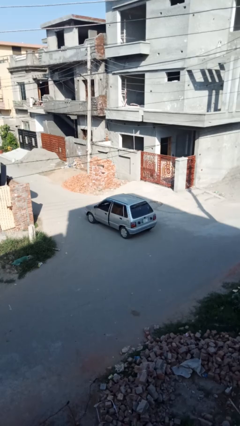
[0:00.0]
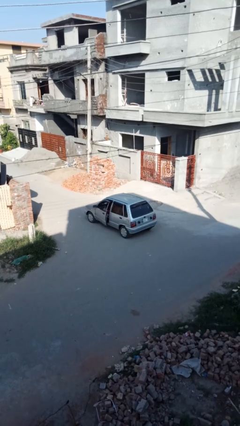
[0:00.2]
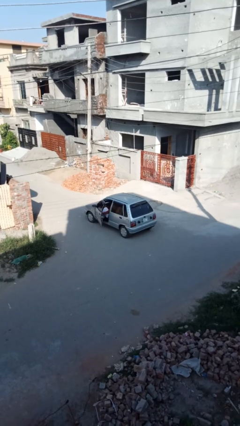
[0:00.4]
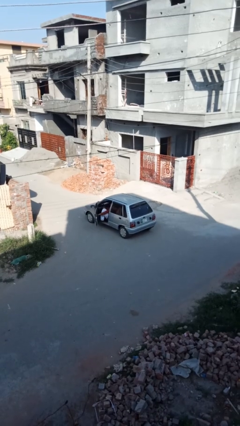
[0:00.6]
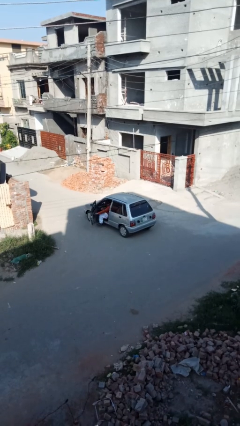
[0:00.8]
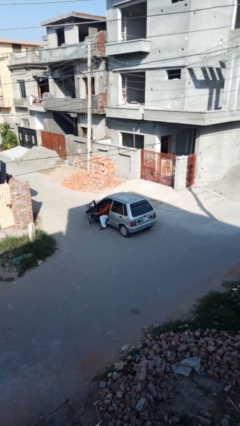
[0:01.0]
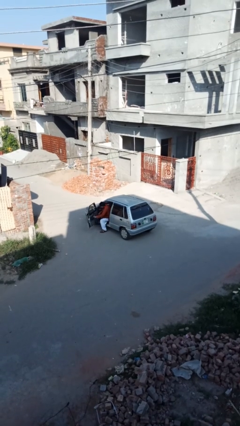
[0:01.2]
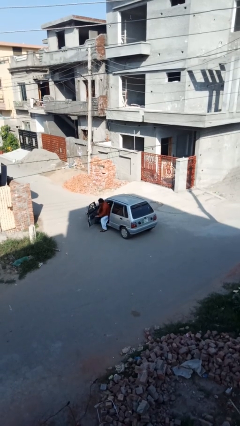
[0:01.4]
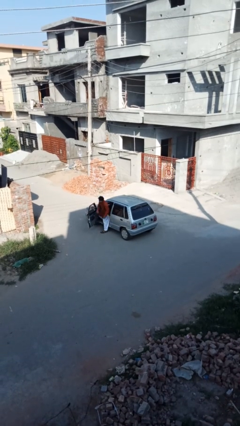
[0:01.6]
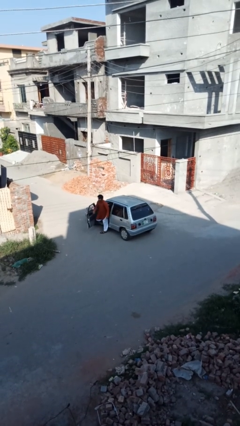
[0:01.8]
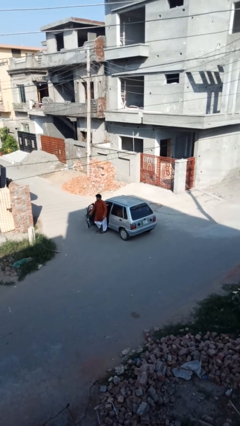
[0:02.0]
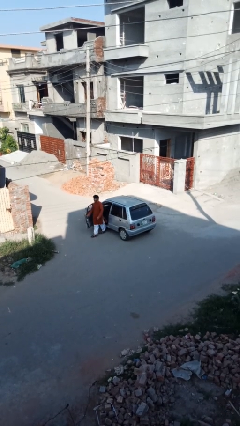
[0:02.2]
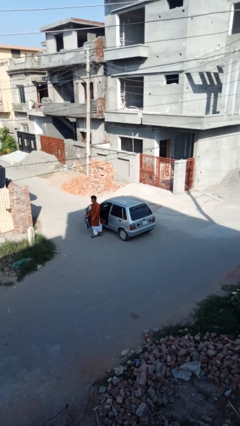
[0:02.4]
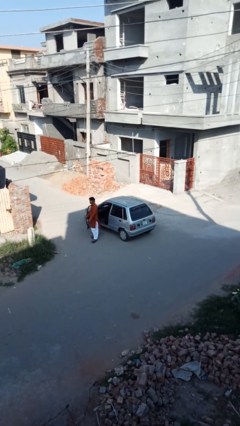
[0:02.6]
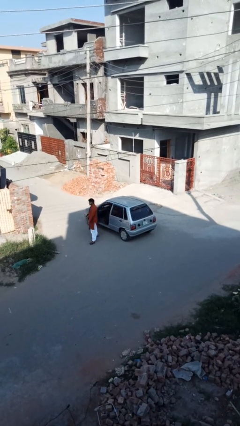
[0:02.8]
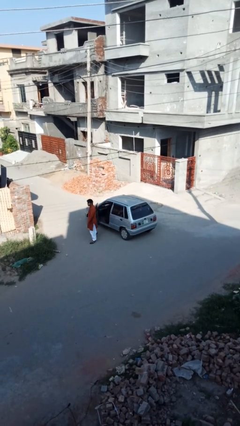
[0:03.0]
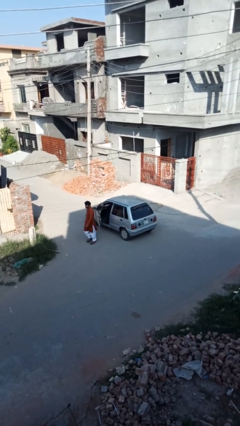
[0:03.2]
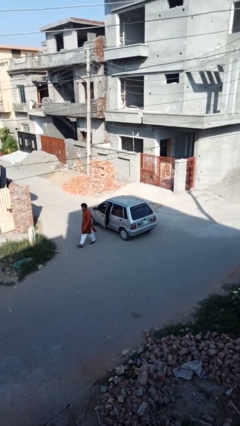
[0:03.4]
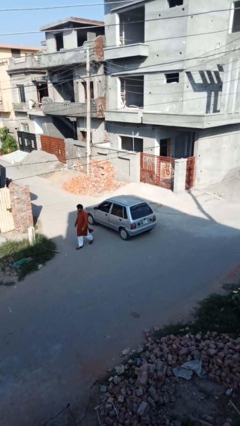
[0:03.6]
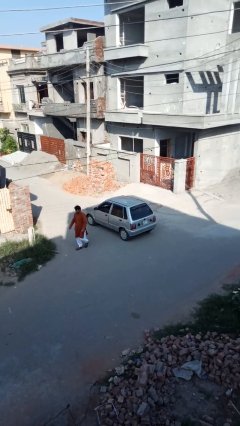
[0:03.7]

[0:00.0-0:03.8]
car drops off person

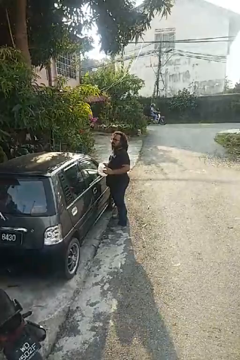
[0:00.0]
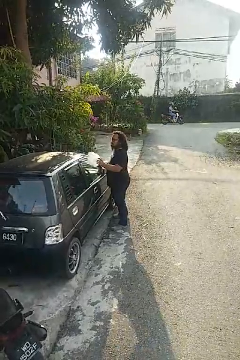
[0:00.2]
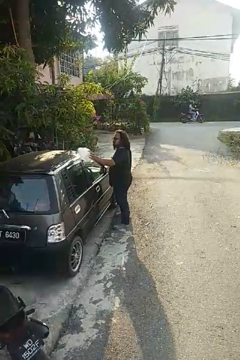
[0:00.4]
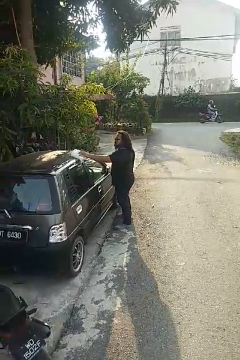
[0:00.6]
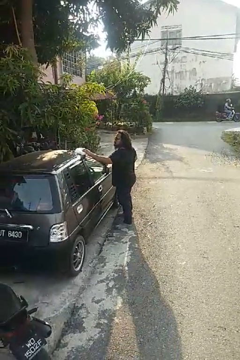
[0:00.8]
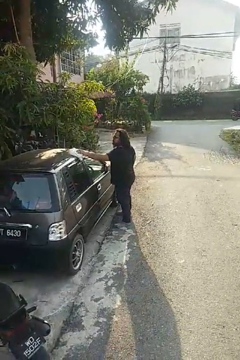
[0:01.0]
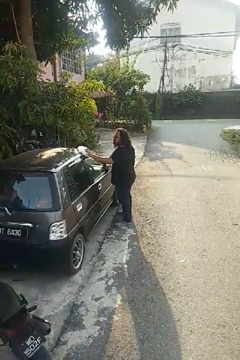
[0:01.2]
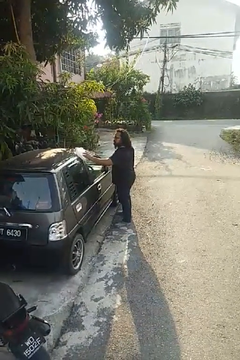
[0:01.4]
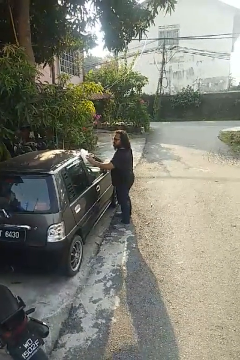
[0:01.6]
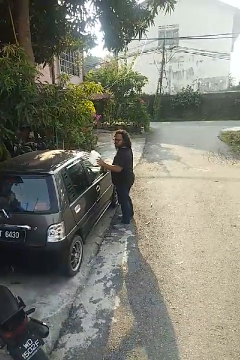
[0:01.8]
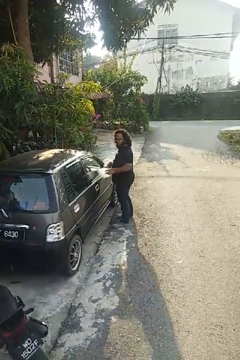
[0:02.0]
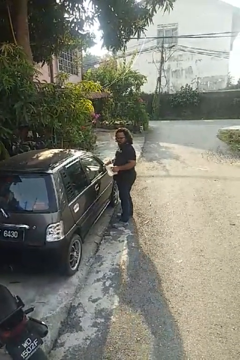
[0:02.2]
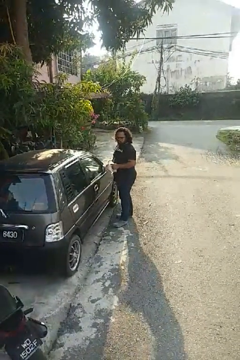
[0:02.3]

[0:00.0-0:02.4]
person polishes car with rag

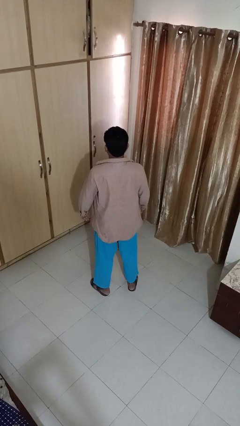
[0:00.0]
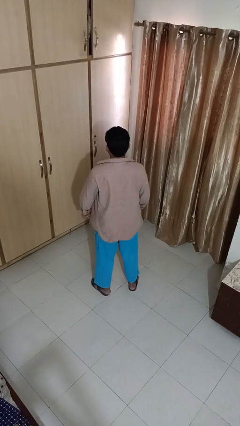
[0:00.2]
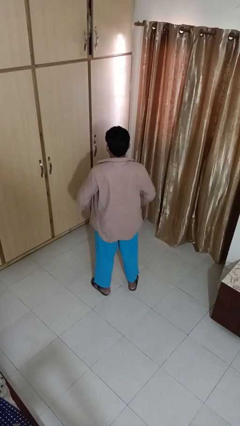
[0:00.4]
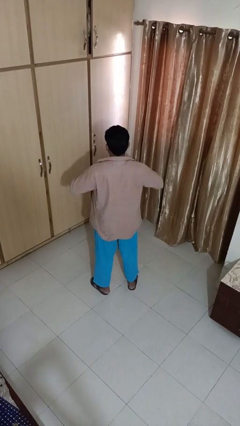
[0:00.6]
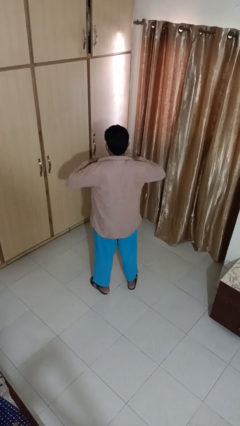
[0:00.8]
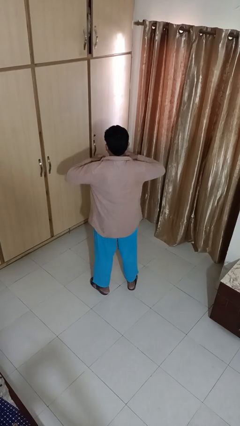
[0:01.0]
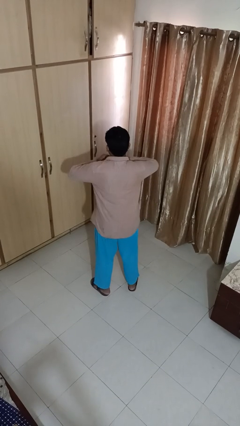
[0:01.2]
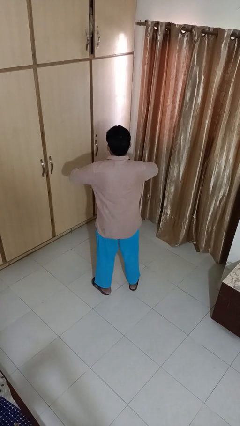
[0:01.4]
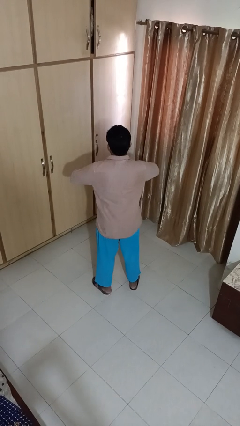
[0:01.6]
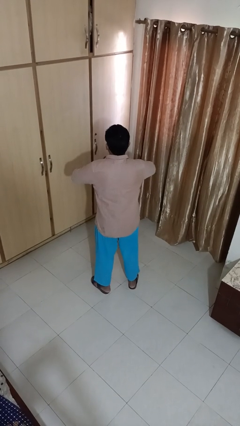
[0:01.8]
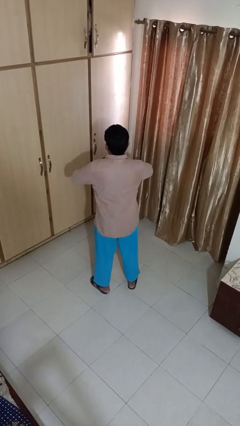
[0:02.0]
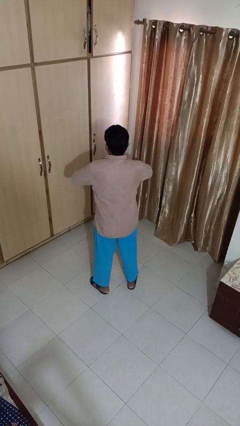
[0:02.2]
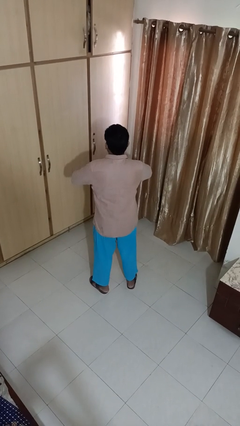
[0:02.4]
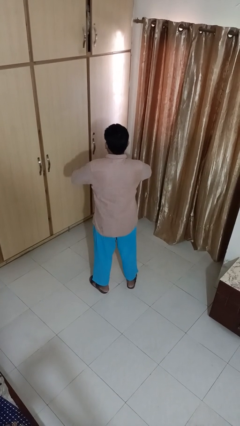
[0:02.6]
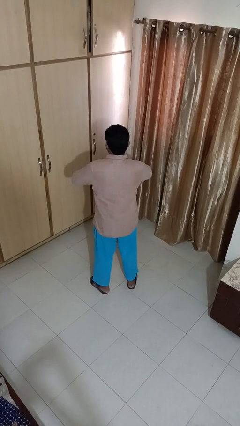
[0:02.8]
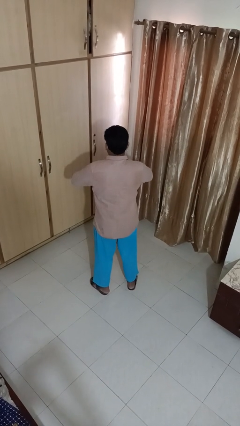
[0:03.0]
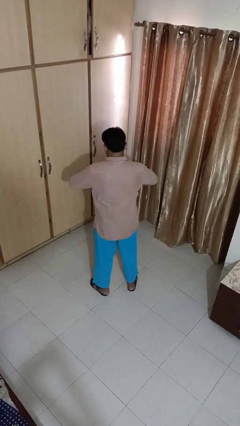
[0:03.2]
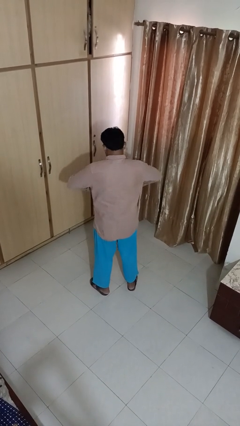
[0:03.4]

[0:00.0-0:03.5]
person buttons shirt

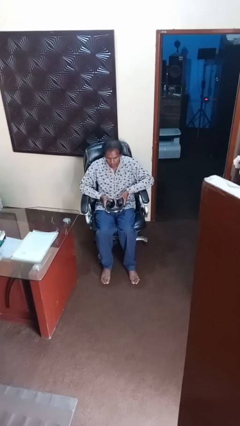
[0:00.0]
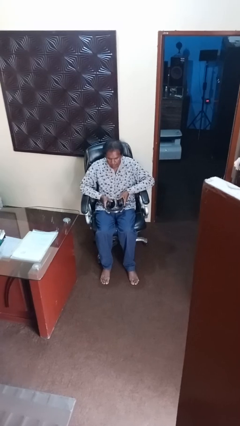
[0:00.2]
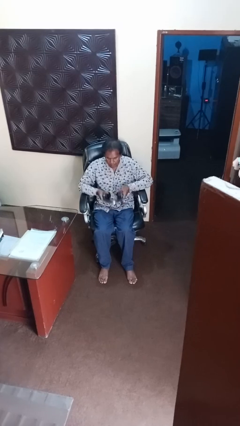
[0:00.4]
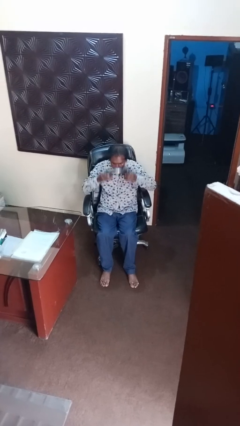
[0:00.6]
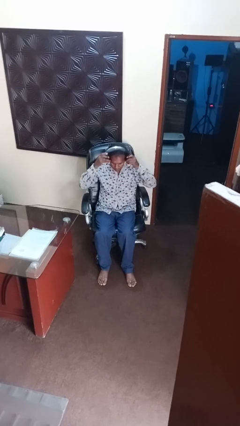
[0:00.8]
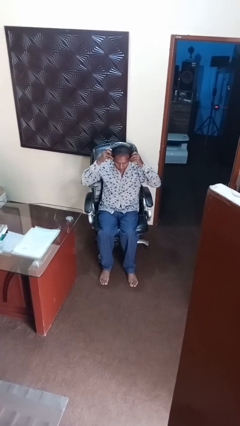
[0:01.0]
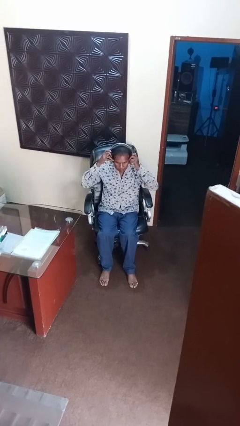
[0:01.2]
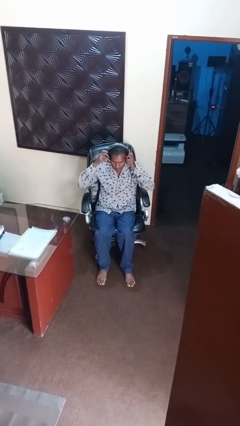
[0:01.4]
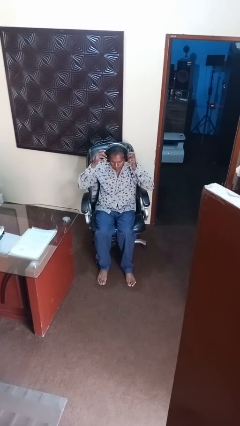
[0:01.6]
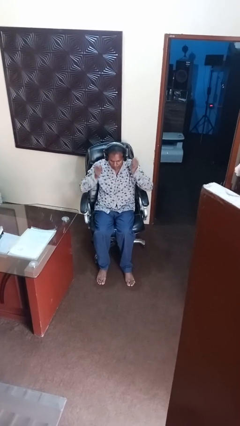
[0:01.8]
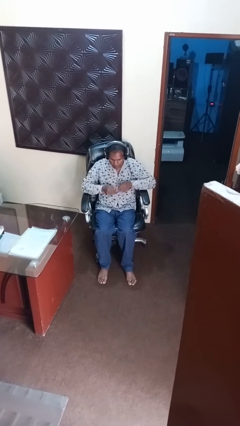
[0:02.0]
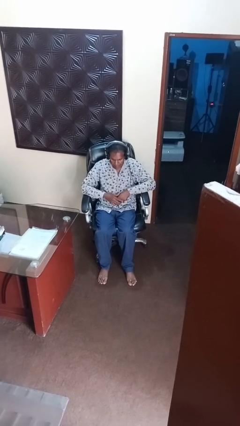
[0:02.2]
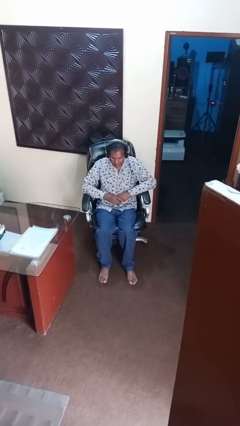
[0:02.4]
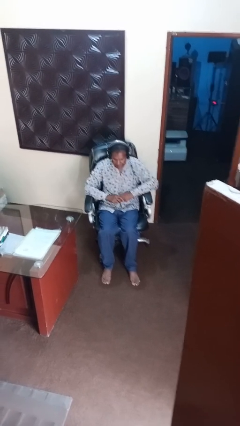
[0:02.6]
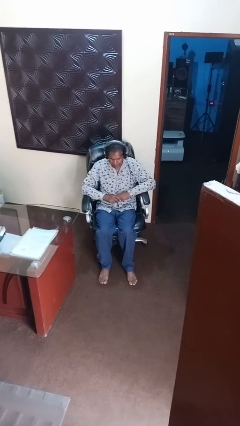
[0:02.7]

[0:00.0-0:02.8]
person puts on headphones

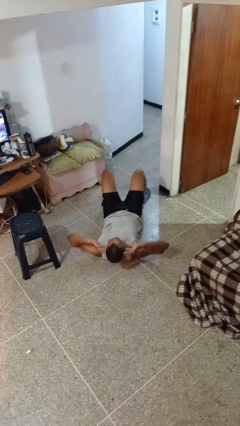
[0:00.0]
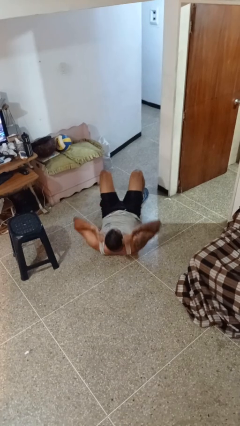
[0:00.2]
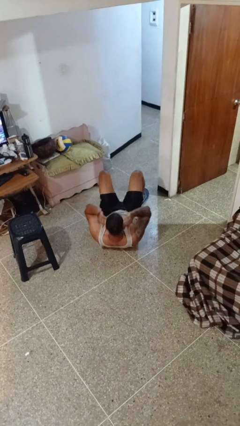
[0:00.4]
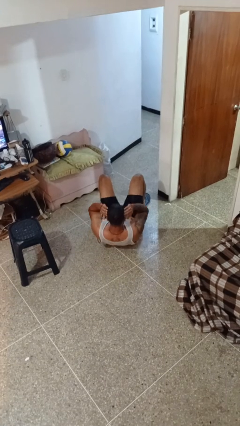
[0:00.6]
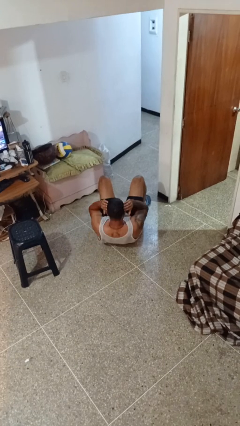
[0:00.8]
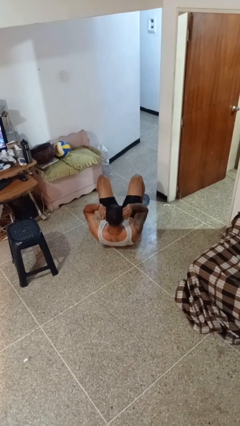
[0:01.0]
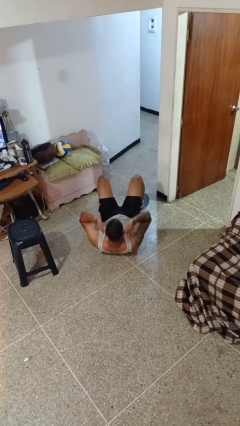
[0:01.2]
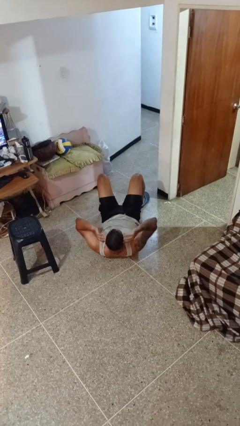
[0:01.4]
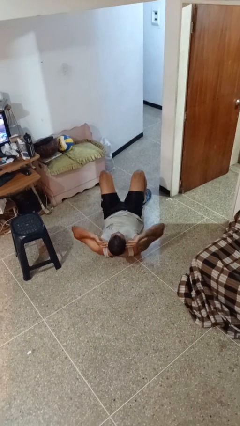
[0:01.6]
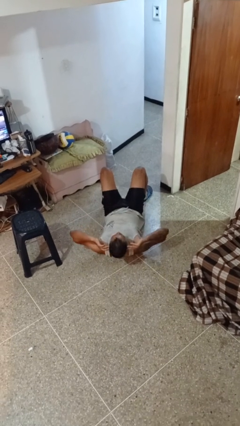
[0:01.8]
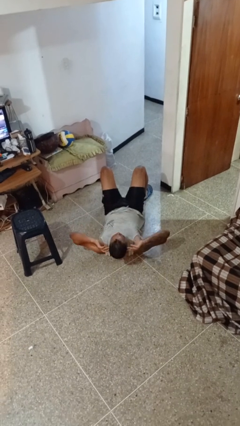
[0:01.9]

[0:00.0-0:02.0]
person exercises with situp

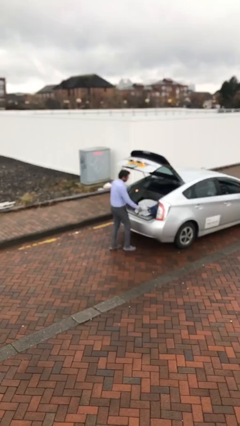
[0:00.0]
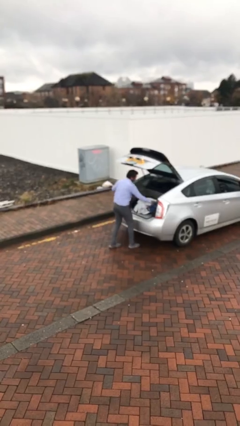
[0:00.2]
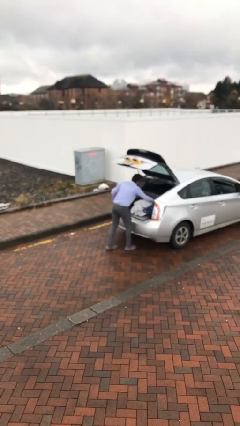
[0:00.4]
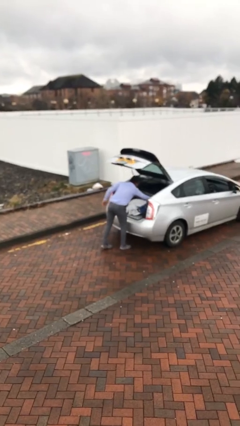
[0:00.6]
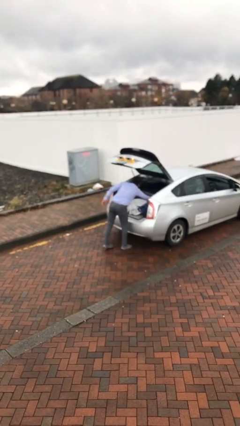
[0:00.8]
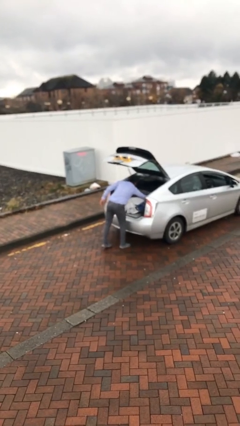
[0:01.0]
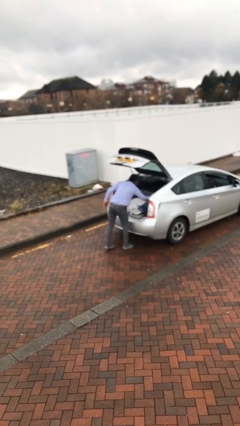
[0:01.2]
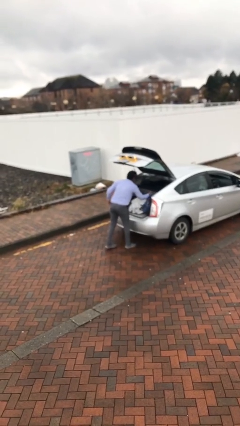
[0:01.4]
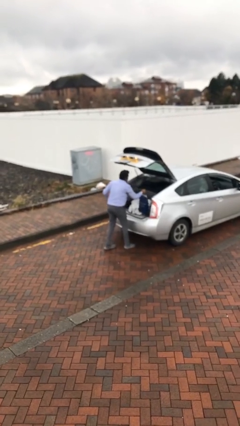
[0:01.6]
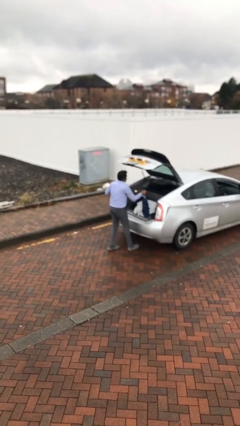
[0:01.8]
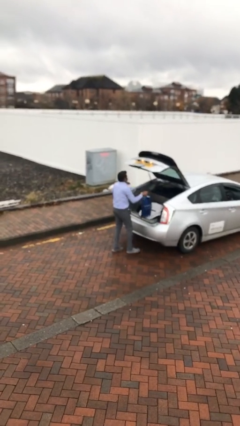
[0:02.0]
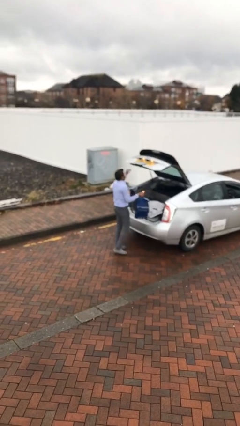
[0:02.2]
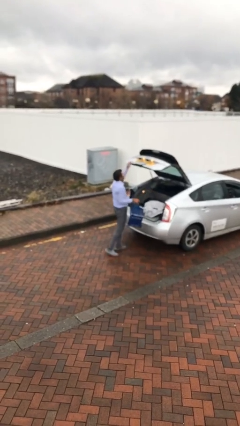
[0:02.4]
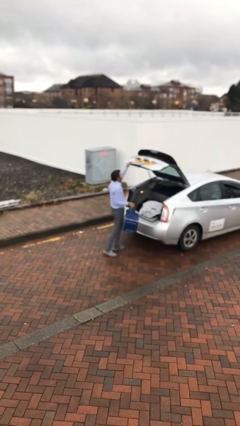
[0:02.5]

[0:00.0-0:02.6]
person unloads car

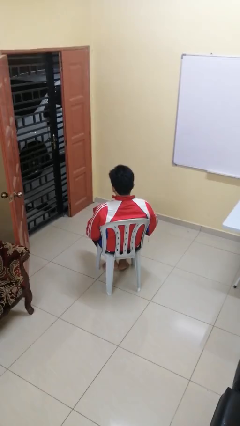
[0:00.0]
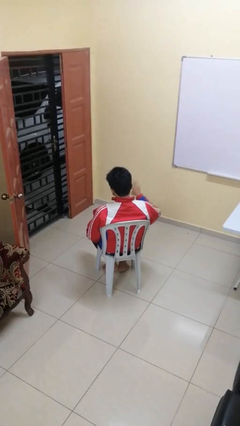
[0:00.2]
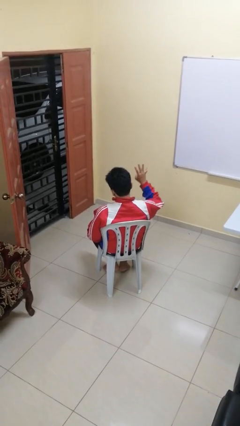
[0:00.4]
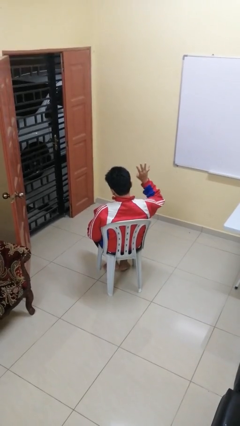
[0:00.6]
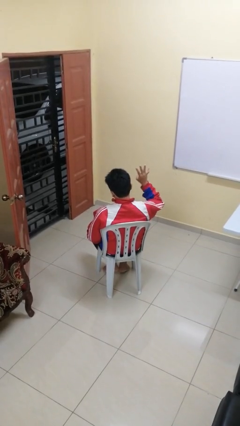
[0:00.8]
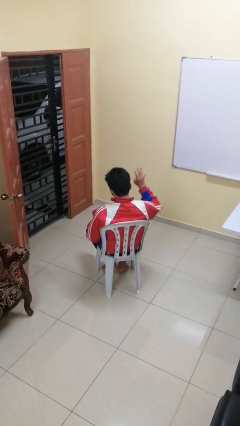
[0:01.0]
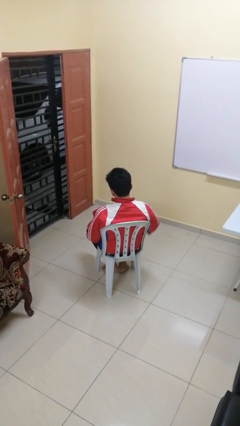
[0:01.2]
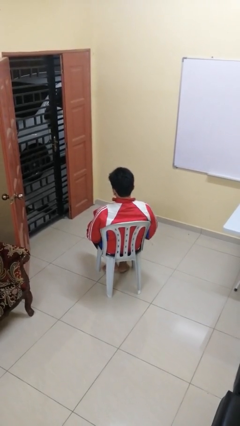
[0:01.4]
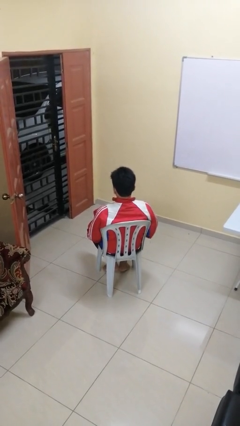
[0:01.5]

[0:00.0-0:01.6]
person gestures number four
